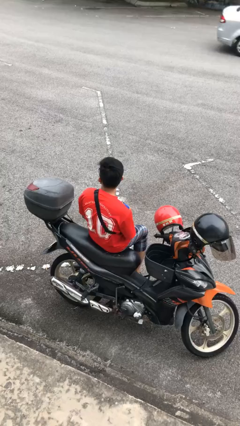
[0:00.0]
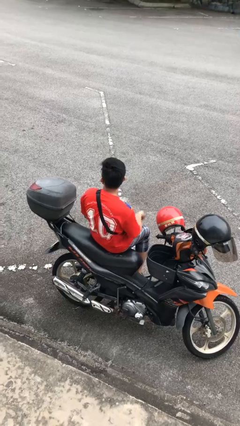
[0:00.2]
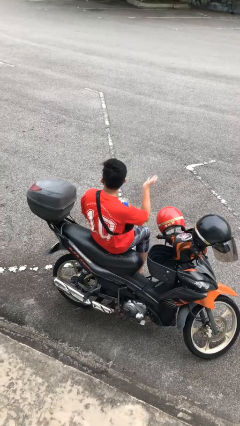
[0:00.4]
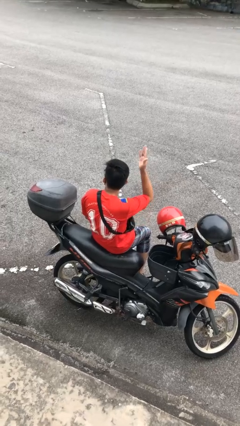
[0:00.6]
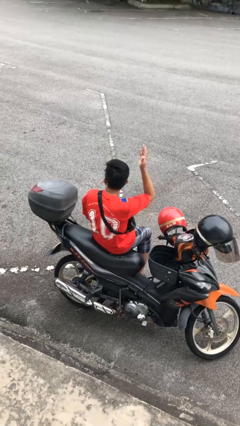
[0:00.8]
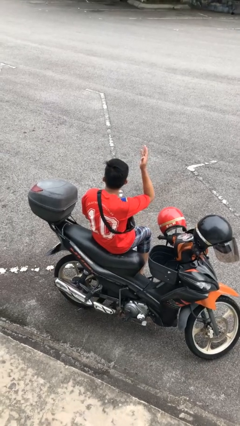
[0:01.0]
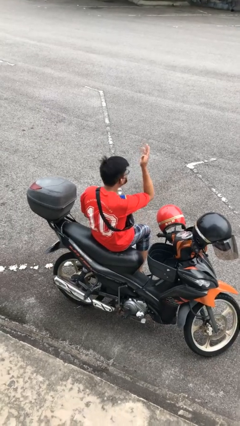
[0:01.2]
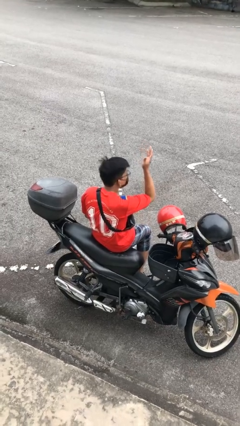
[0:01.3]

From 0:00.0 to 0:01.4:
person gestures swipe up

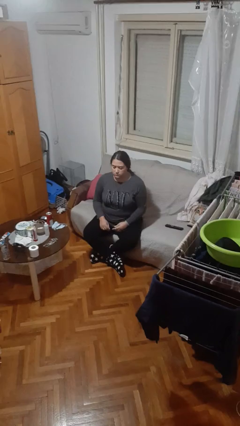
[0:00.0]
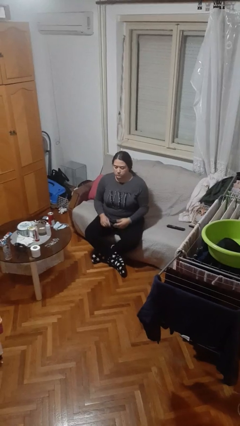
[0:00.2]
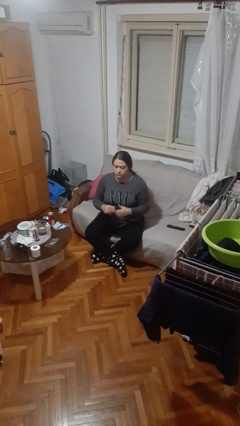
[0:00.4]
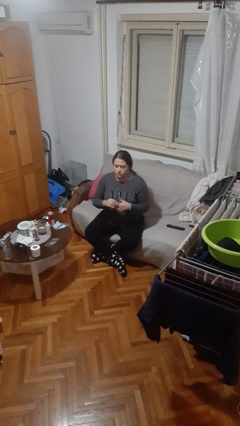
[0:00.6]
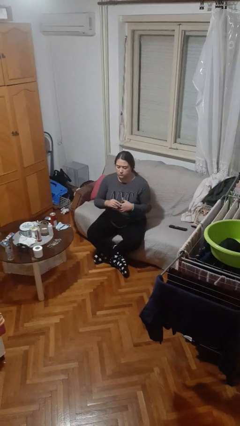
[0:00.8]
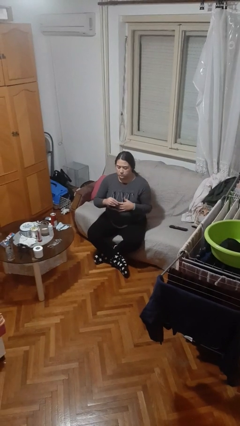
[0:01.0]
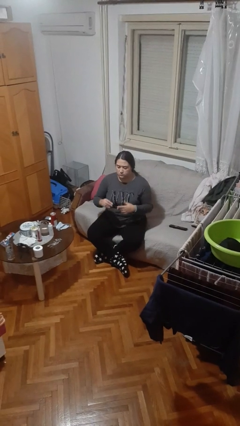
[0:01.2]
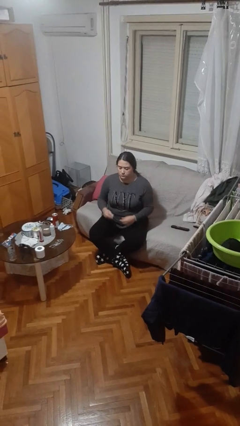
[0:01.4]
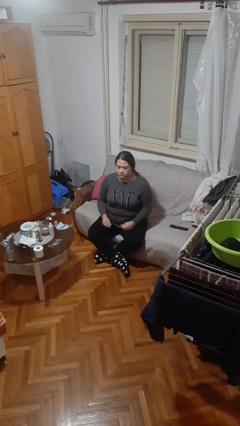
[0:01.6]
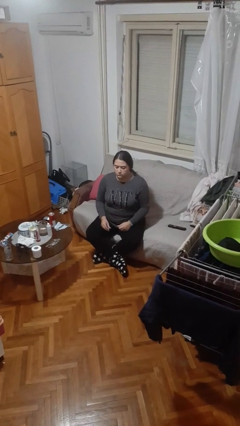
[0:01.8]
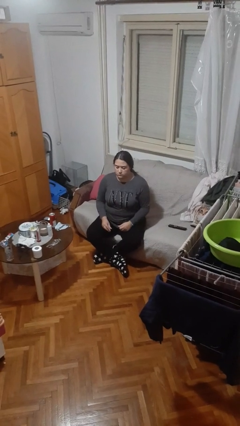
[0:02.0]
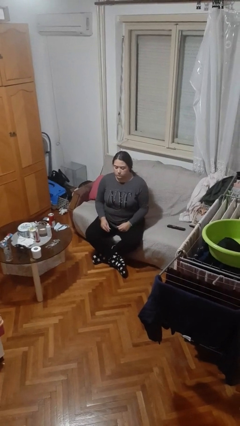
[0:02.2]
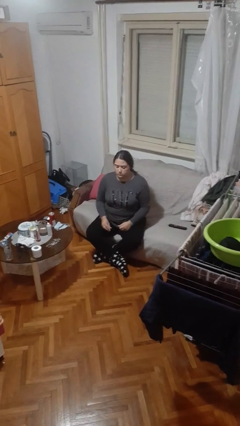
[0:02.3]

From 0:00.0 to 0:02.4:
person takes off ring

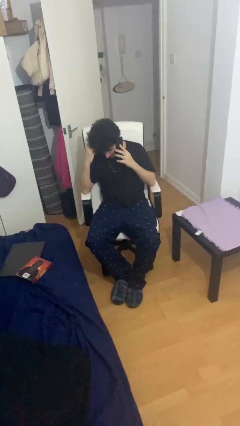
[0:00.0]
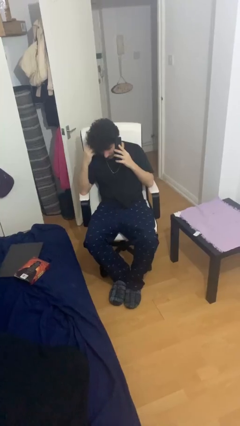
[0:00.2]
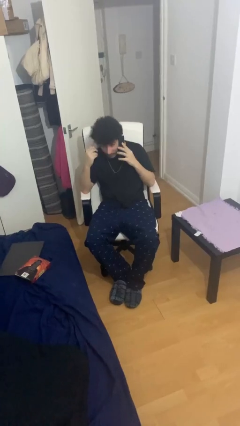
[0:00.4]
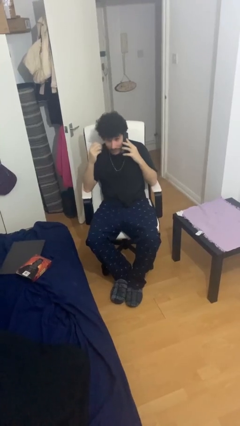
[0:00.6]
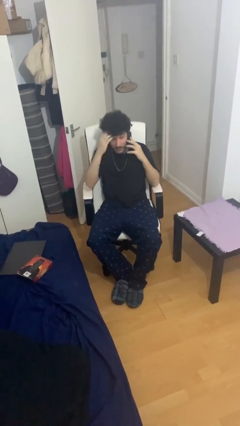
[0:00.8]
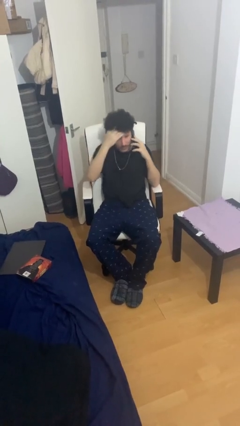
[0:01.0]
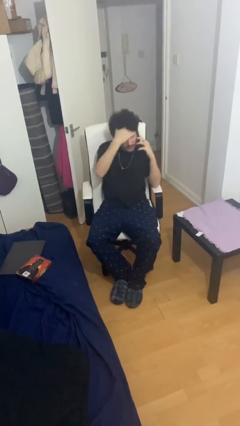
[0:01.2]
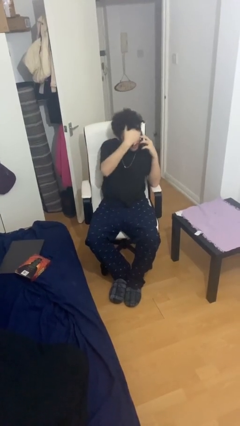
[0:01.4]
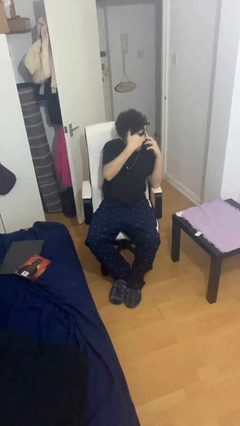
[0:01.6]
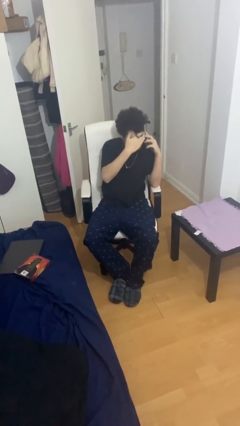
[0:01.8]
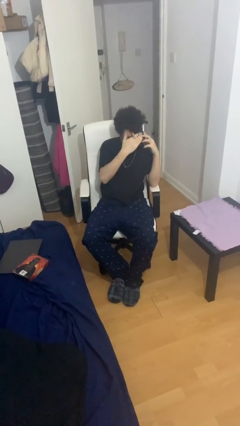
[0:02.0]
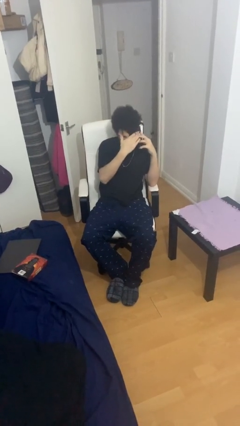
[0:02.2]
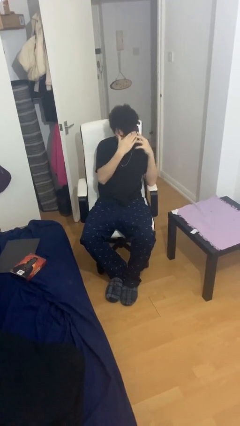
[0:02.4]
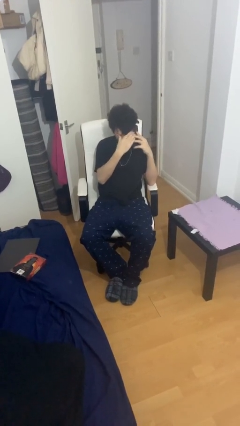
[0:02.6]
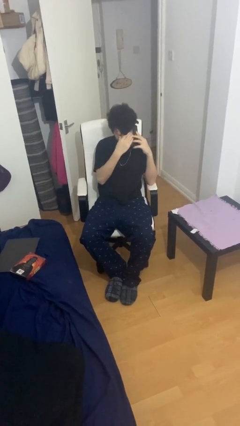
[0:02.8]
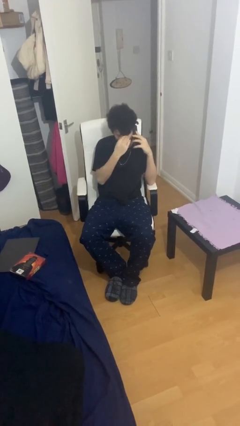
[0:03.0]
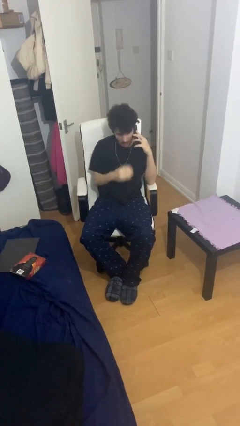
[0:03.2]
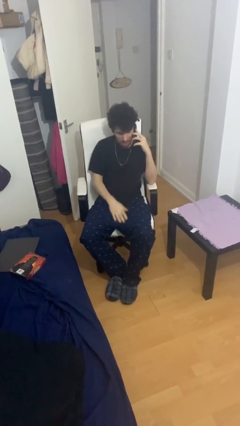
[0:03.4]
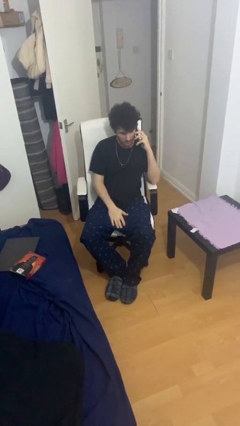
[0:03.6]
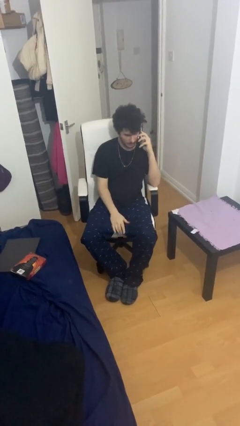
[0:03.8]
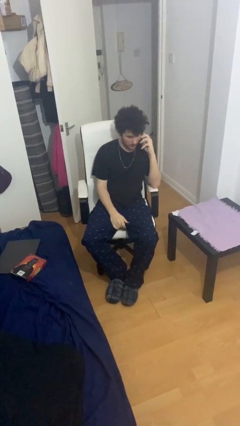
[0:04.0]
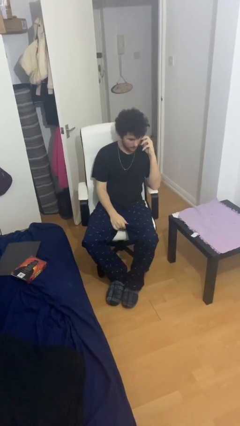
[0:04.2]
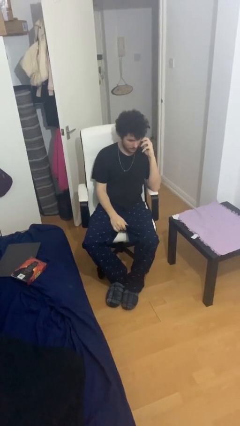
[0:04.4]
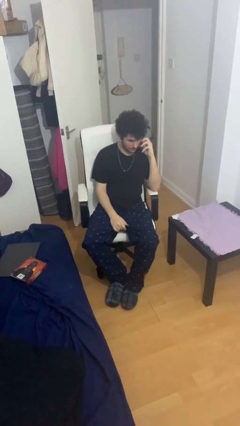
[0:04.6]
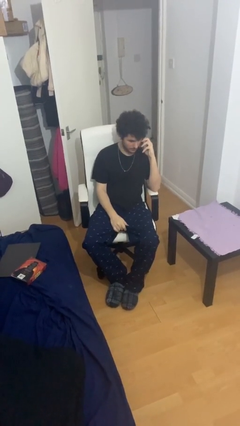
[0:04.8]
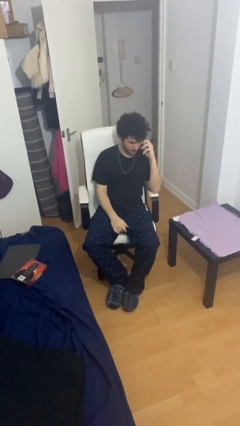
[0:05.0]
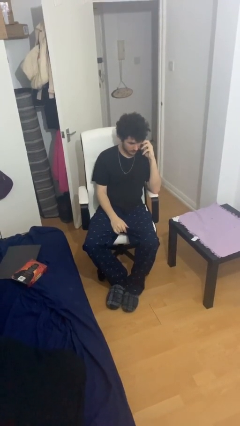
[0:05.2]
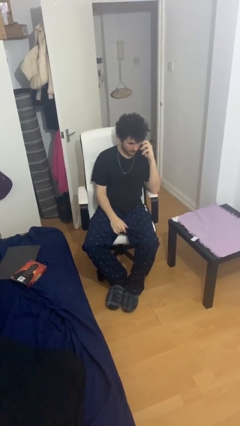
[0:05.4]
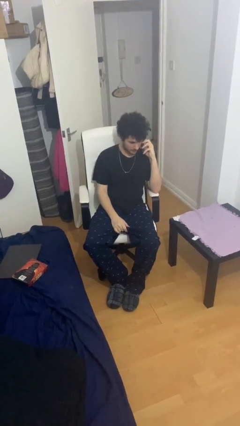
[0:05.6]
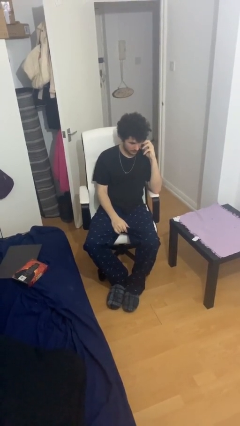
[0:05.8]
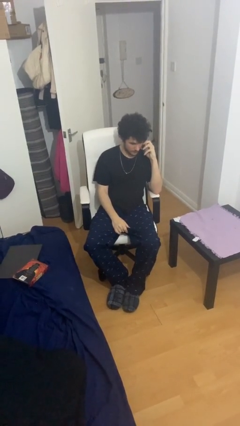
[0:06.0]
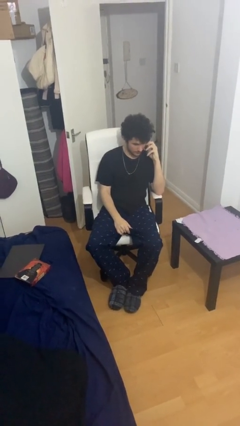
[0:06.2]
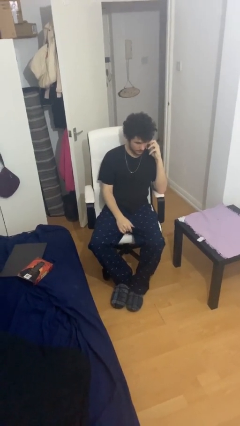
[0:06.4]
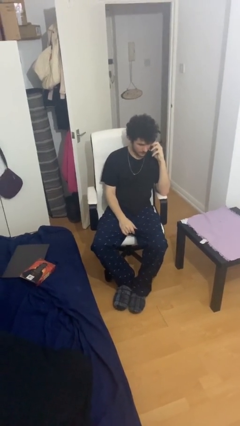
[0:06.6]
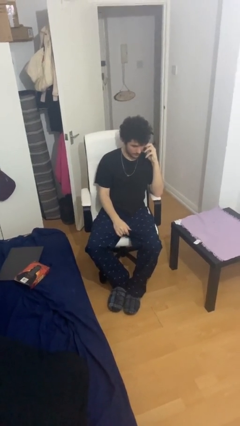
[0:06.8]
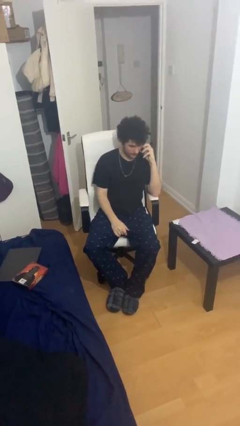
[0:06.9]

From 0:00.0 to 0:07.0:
person talks on phone

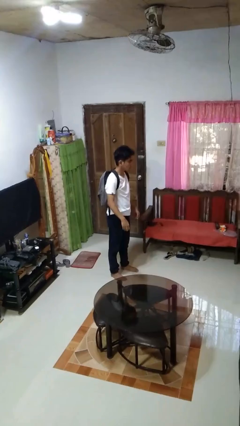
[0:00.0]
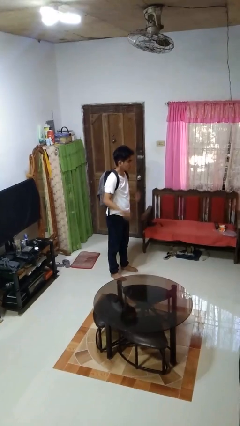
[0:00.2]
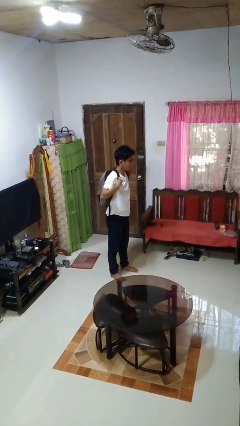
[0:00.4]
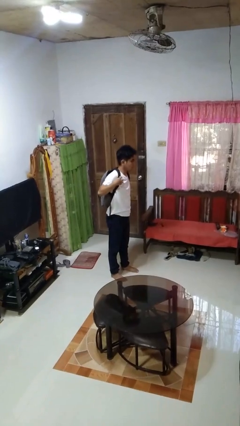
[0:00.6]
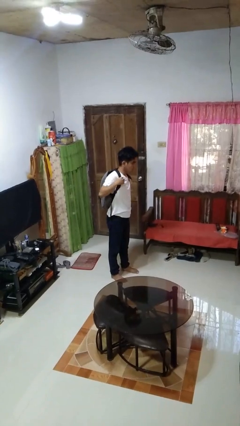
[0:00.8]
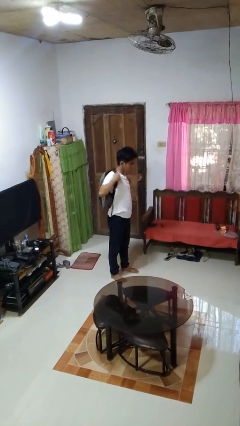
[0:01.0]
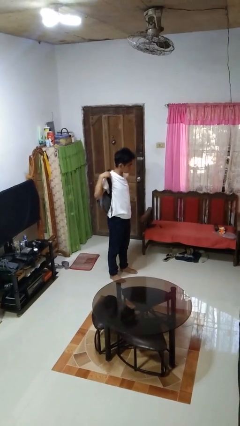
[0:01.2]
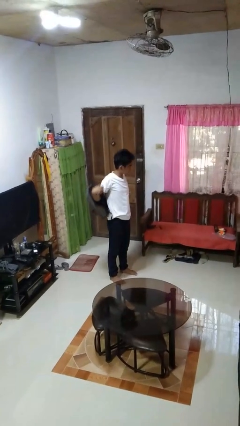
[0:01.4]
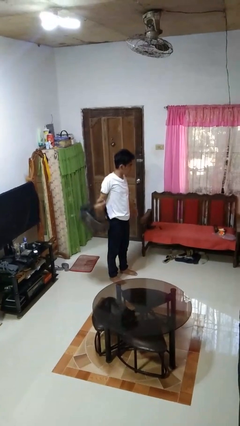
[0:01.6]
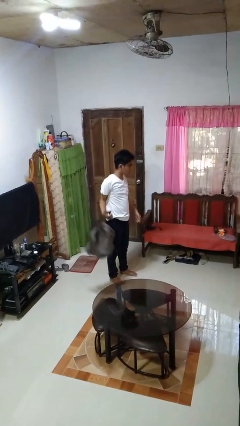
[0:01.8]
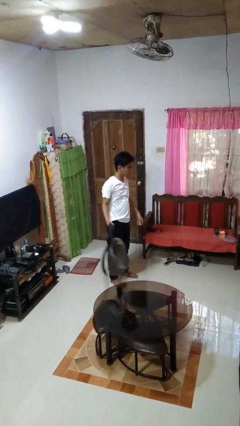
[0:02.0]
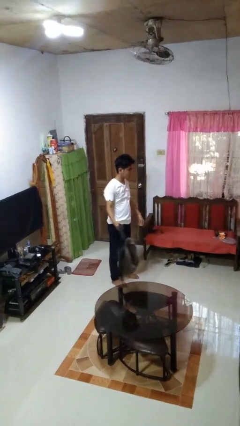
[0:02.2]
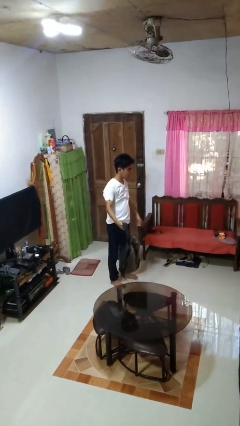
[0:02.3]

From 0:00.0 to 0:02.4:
person takes off backpack

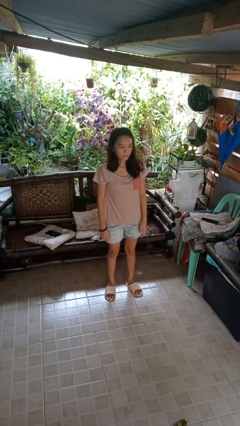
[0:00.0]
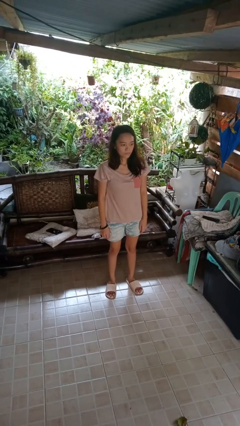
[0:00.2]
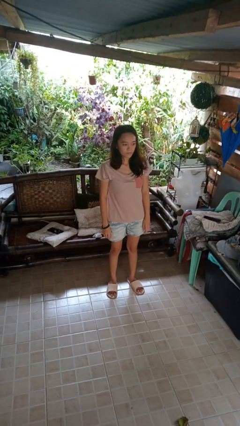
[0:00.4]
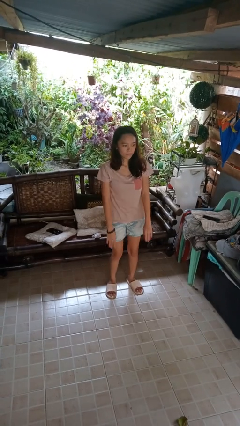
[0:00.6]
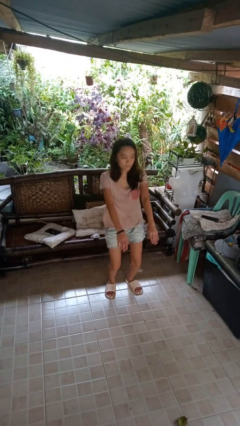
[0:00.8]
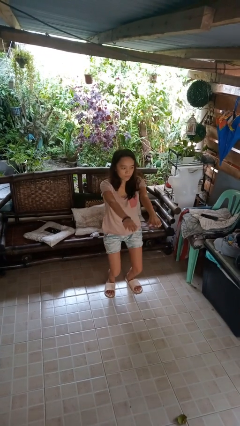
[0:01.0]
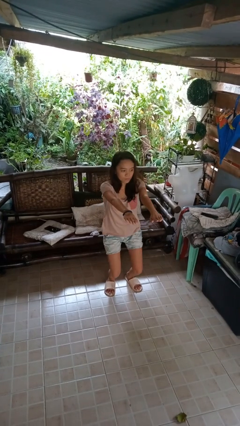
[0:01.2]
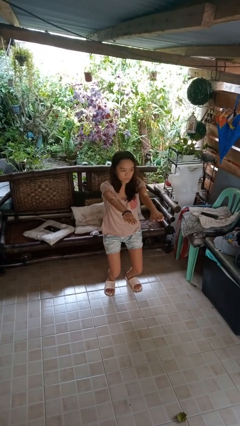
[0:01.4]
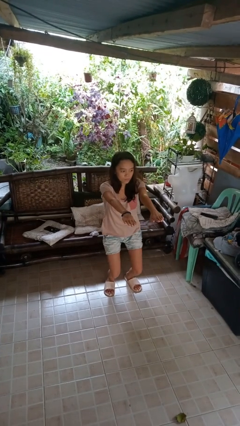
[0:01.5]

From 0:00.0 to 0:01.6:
person squats

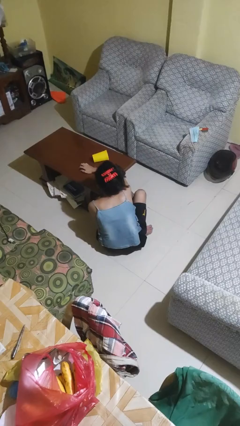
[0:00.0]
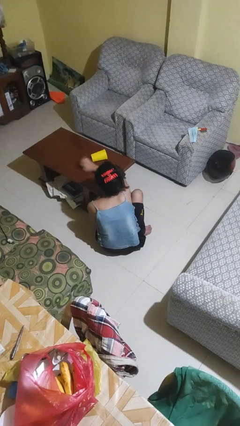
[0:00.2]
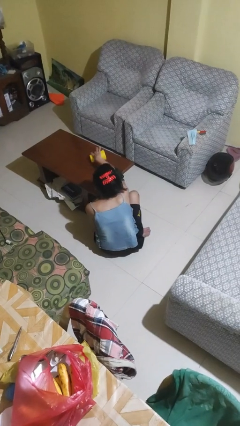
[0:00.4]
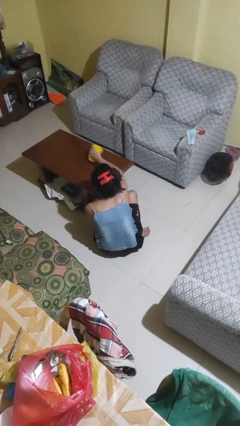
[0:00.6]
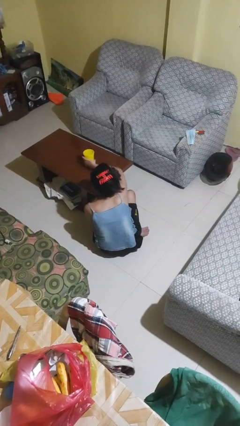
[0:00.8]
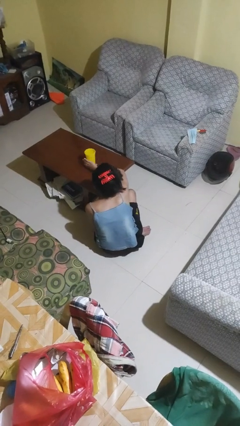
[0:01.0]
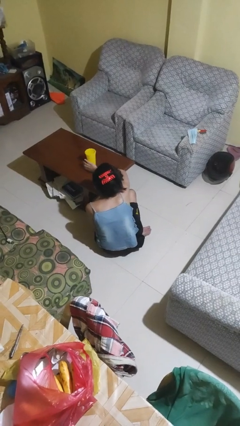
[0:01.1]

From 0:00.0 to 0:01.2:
person sets upright glass

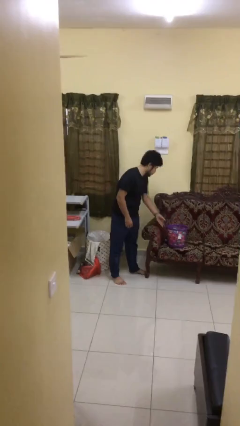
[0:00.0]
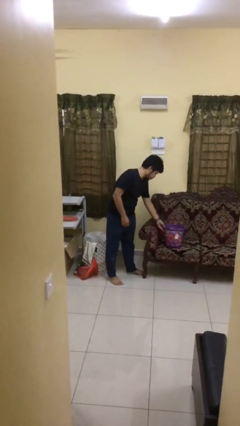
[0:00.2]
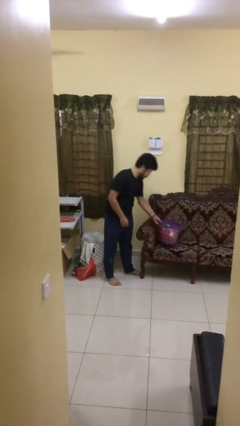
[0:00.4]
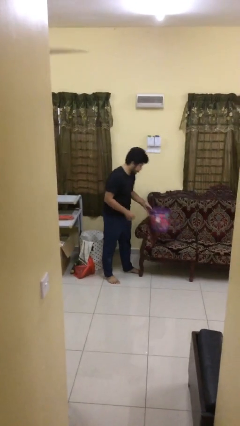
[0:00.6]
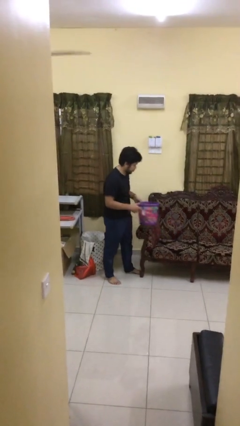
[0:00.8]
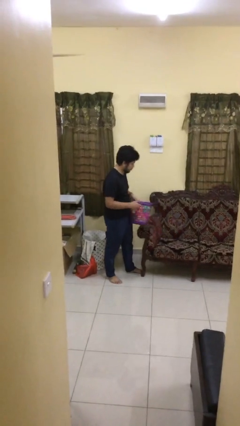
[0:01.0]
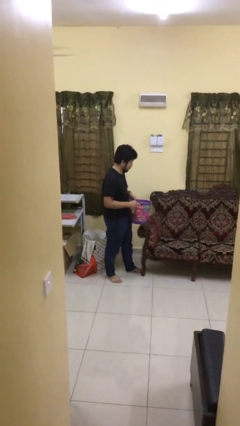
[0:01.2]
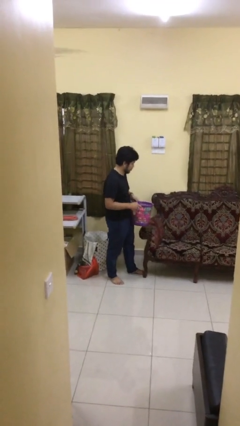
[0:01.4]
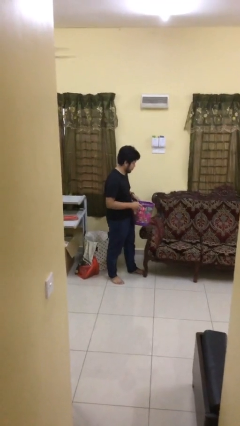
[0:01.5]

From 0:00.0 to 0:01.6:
person picks up object from couch
